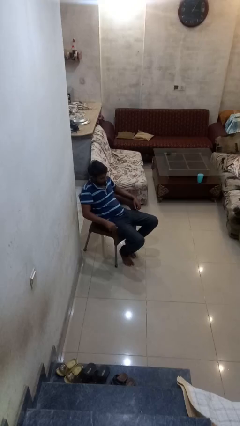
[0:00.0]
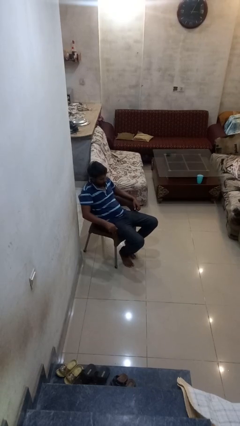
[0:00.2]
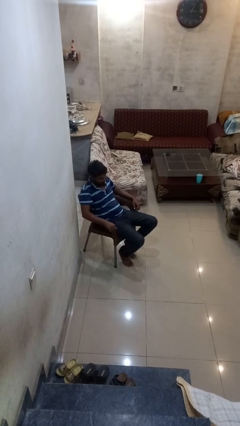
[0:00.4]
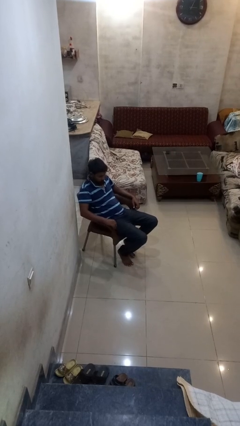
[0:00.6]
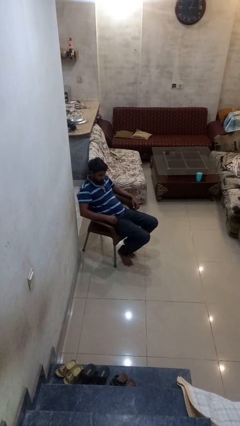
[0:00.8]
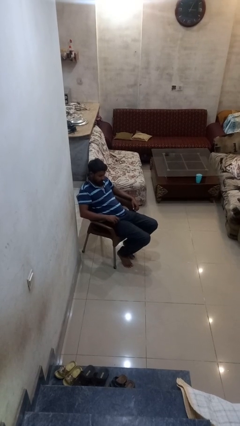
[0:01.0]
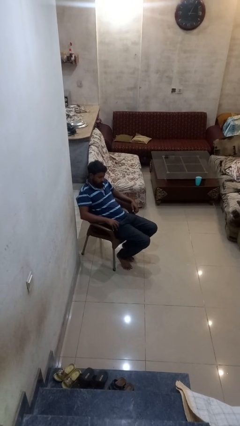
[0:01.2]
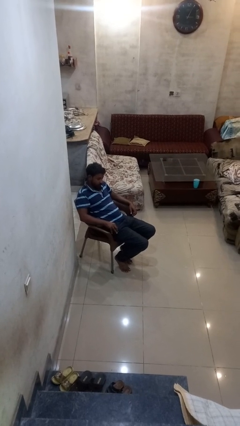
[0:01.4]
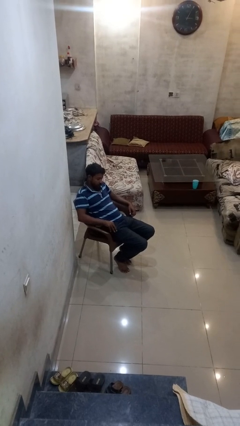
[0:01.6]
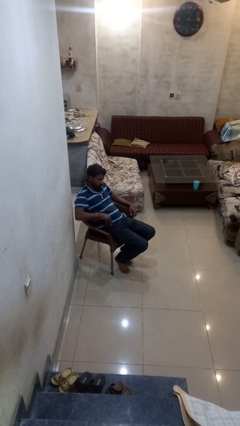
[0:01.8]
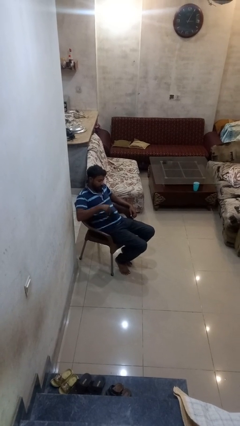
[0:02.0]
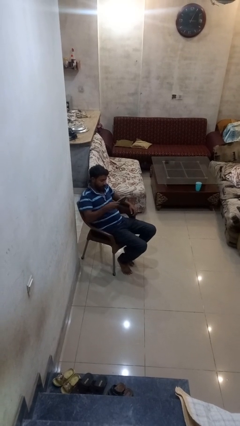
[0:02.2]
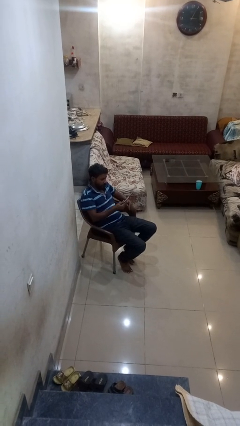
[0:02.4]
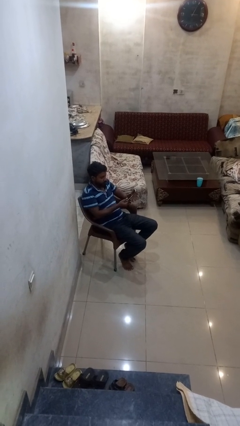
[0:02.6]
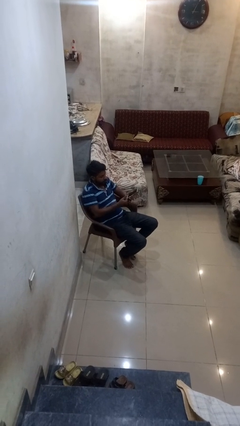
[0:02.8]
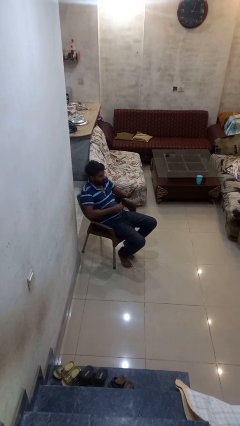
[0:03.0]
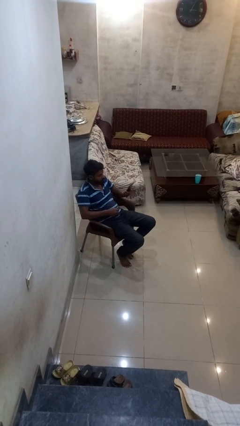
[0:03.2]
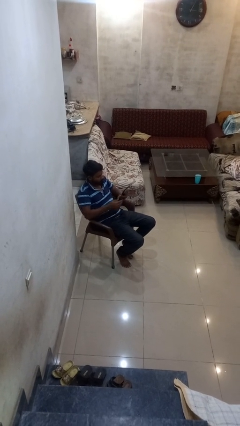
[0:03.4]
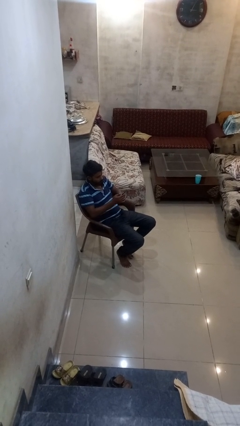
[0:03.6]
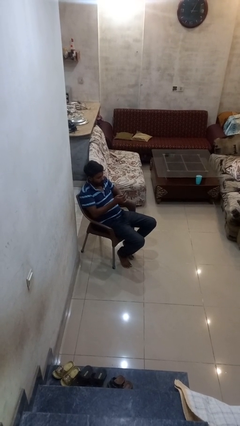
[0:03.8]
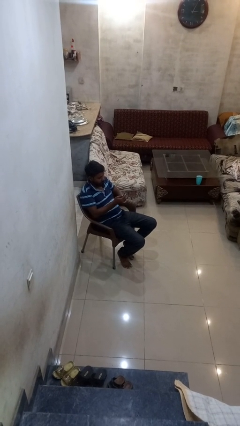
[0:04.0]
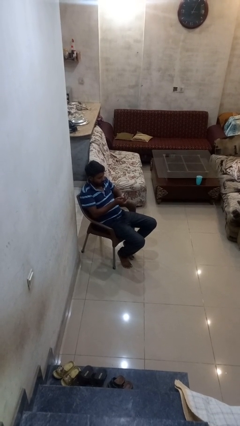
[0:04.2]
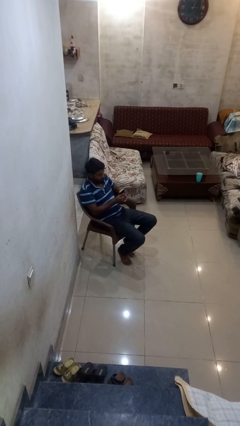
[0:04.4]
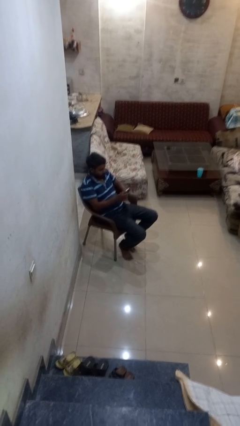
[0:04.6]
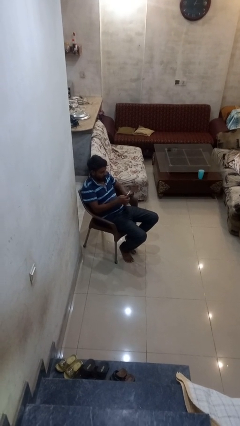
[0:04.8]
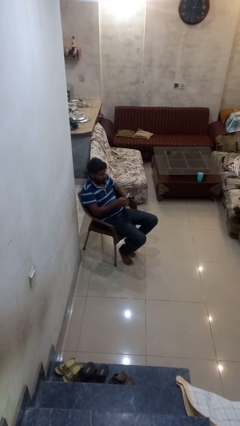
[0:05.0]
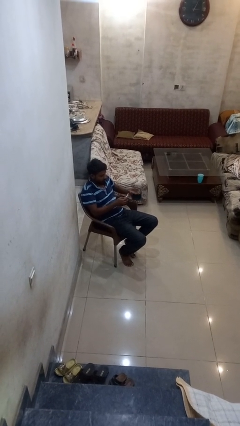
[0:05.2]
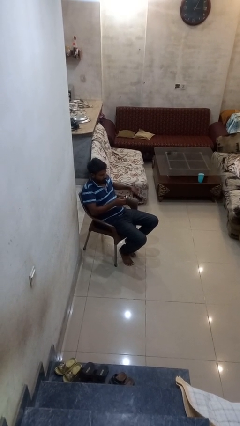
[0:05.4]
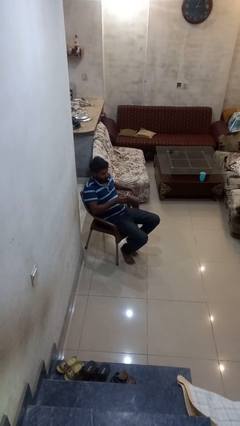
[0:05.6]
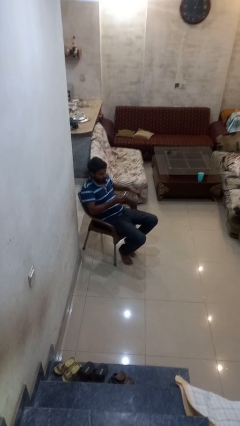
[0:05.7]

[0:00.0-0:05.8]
person takes phone from pocket

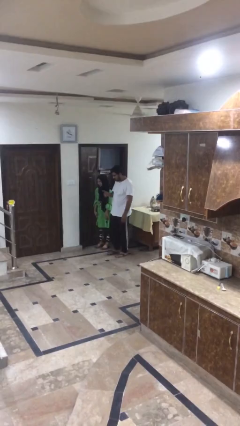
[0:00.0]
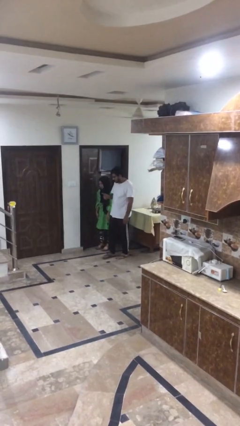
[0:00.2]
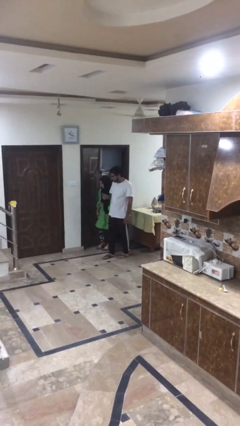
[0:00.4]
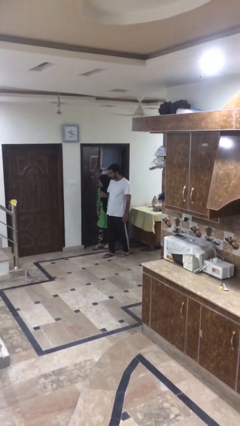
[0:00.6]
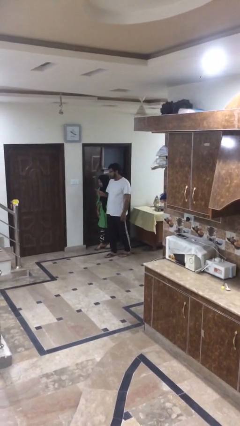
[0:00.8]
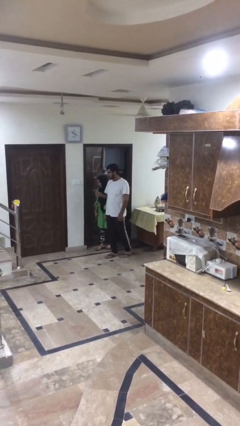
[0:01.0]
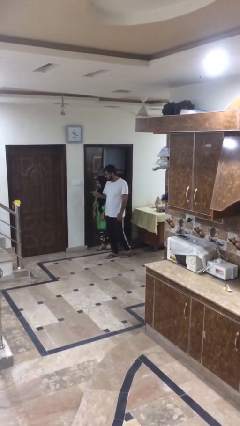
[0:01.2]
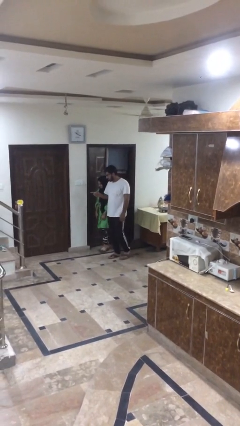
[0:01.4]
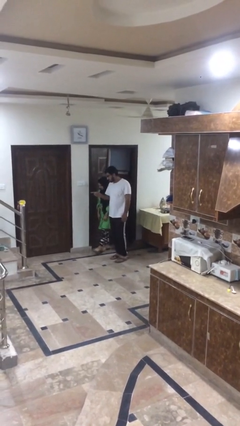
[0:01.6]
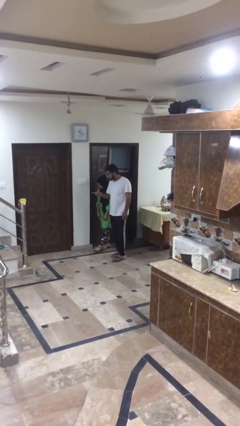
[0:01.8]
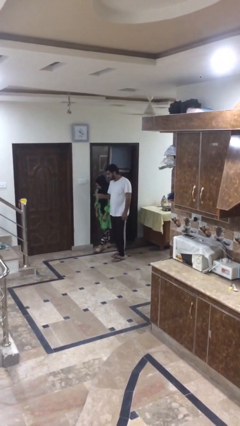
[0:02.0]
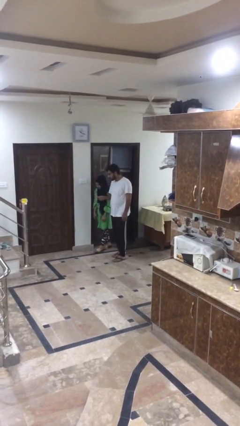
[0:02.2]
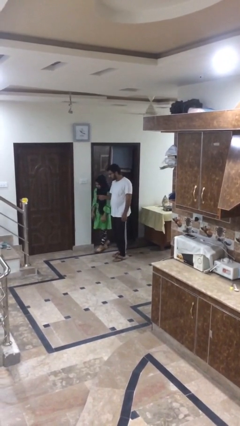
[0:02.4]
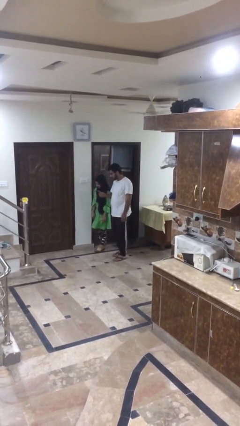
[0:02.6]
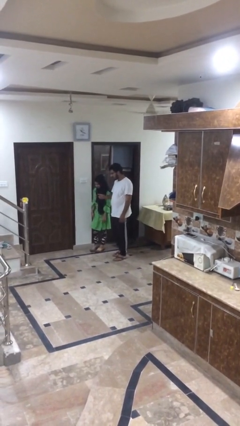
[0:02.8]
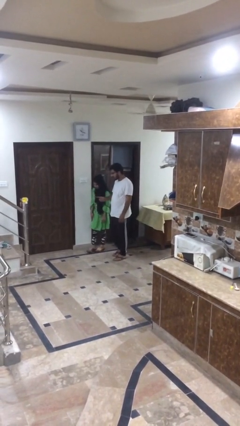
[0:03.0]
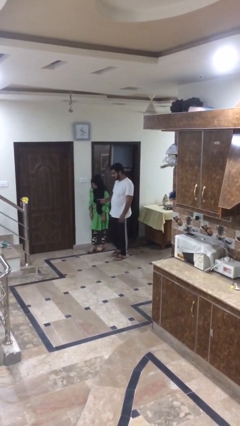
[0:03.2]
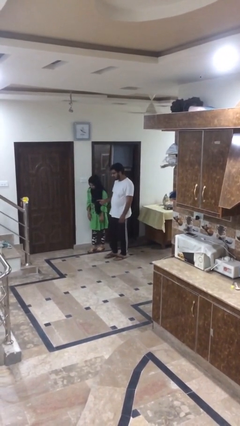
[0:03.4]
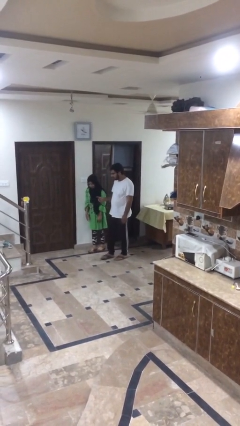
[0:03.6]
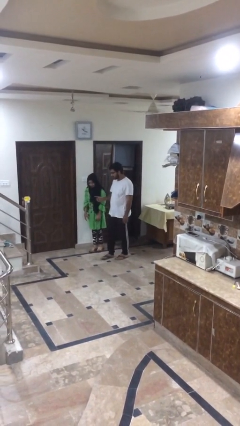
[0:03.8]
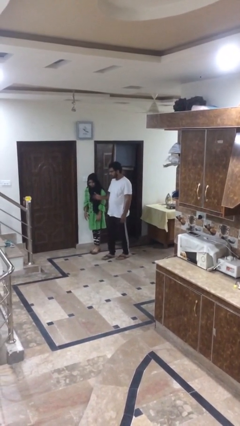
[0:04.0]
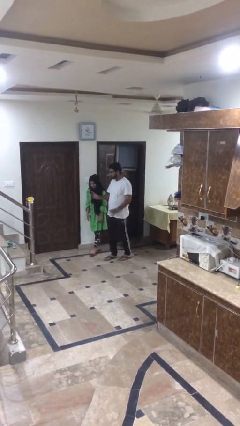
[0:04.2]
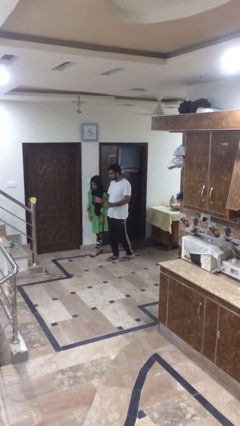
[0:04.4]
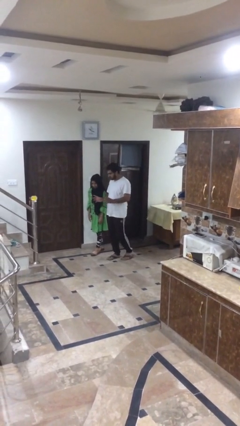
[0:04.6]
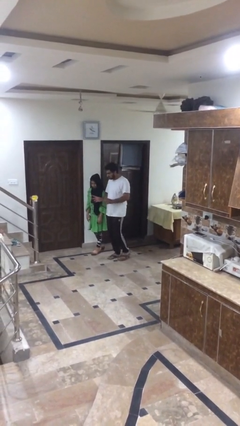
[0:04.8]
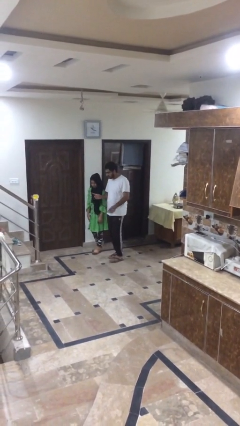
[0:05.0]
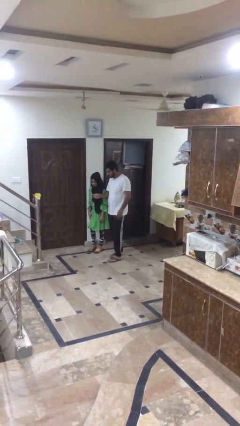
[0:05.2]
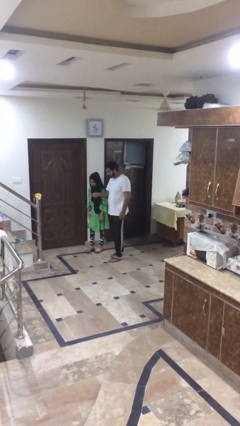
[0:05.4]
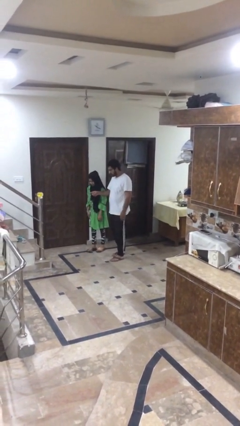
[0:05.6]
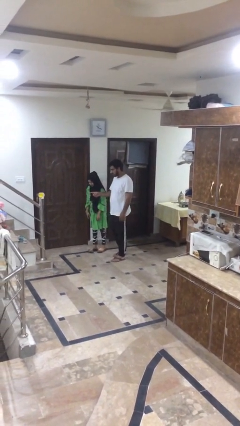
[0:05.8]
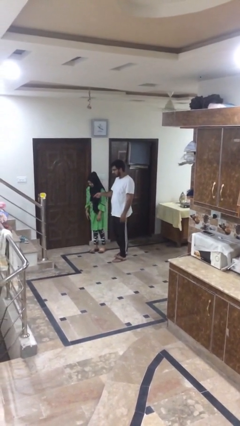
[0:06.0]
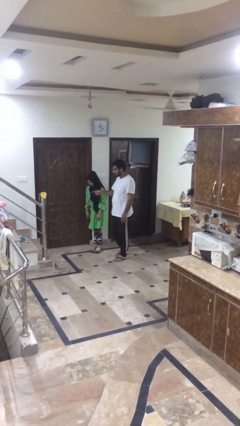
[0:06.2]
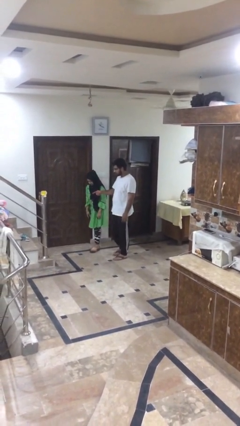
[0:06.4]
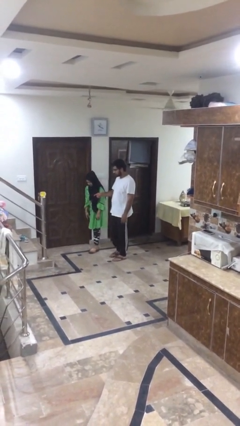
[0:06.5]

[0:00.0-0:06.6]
person talks to person

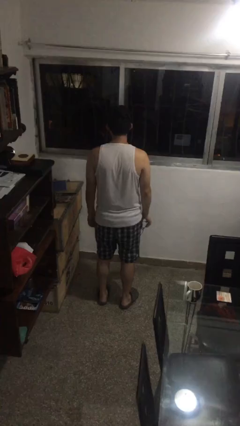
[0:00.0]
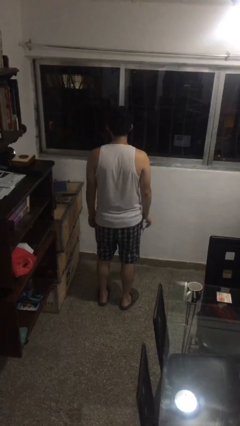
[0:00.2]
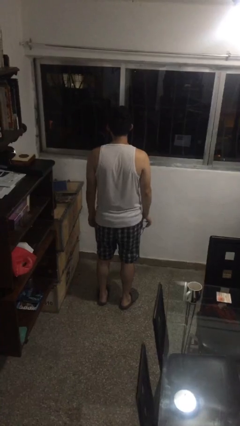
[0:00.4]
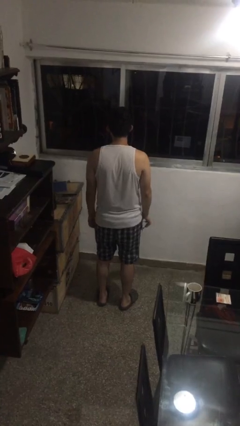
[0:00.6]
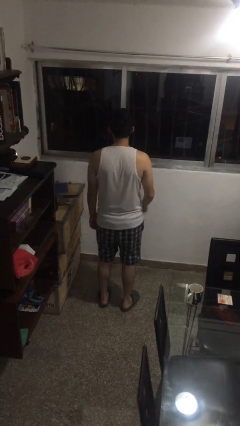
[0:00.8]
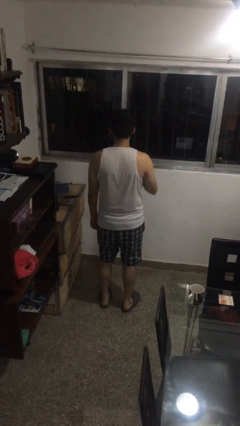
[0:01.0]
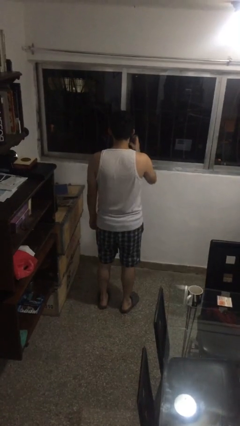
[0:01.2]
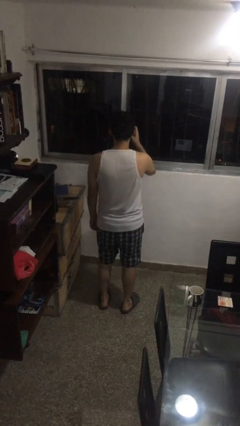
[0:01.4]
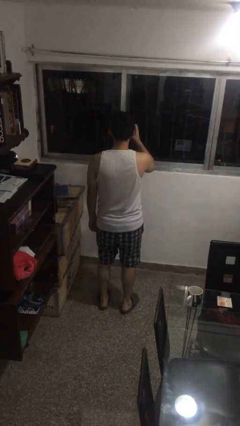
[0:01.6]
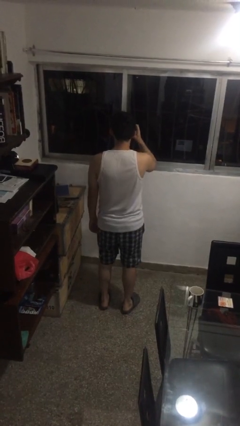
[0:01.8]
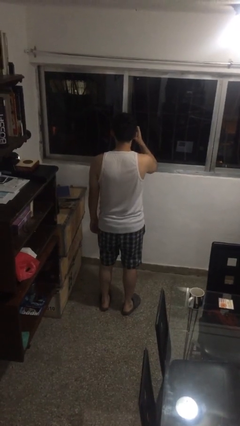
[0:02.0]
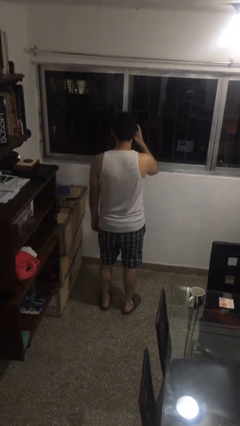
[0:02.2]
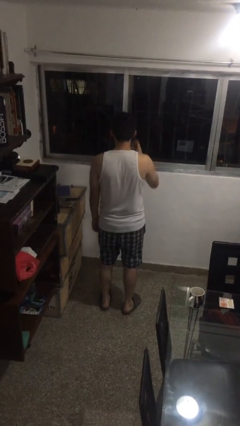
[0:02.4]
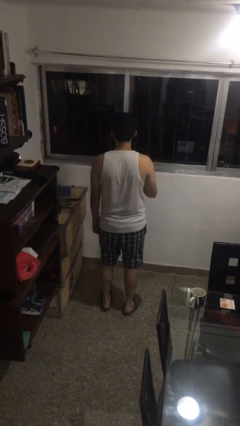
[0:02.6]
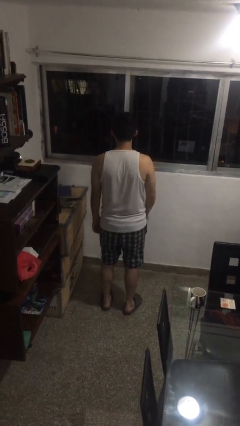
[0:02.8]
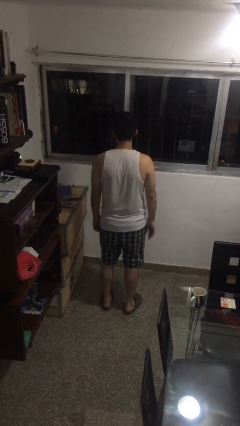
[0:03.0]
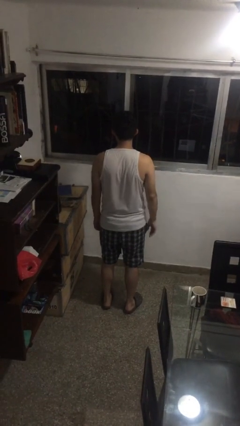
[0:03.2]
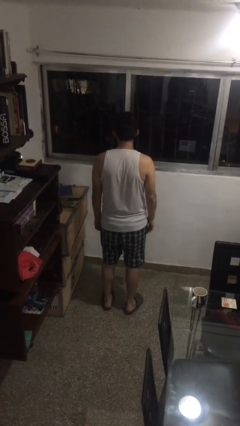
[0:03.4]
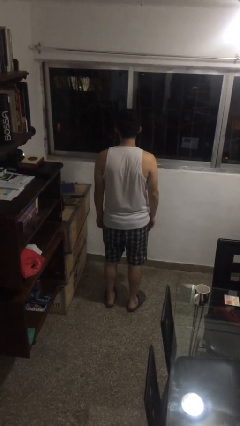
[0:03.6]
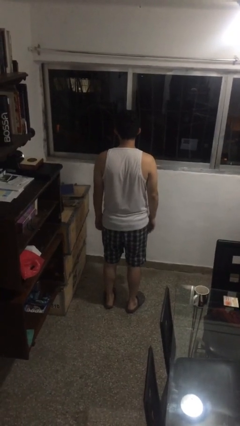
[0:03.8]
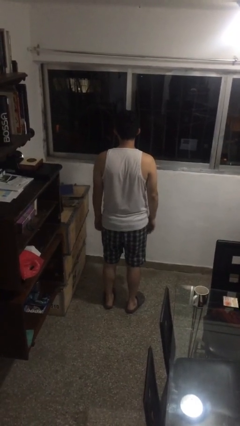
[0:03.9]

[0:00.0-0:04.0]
person puts on glasses

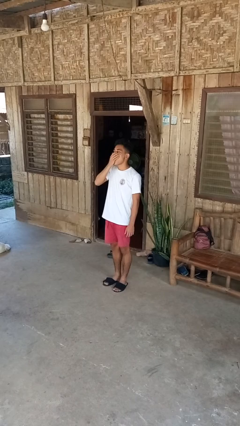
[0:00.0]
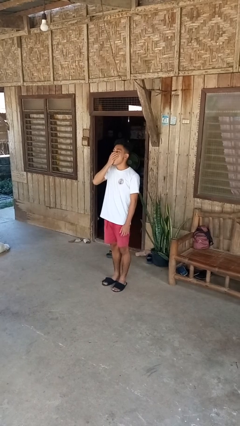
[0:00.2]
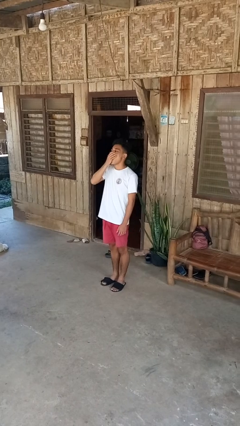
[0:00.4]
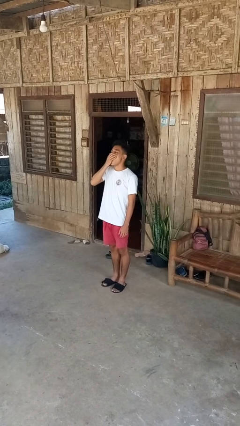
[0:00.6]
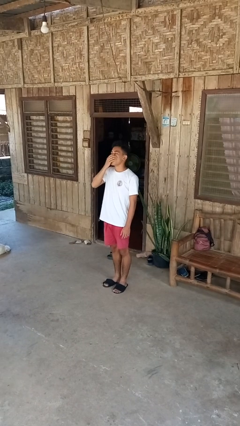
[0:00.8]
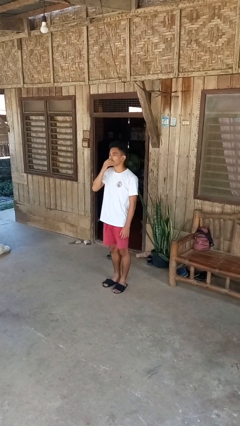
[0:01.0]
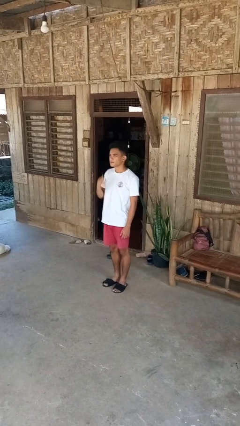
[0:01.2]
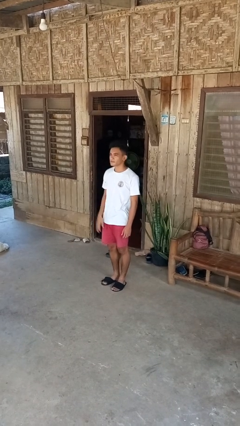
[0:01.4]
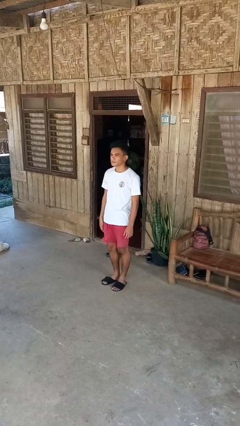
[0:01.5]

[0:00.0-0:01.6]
person yawns
